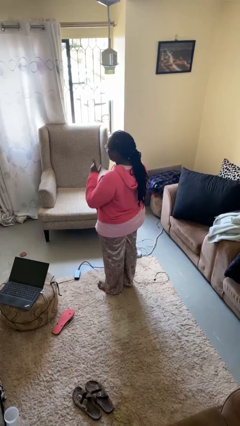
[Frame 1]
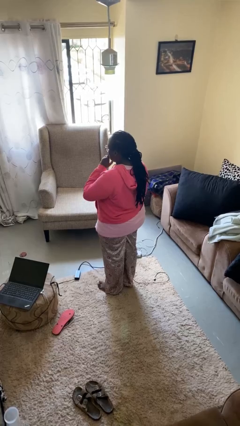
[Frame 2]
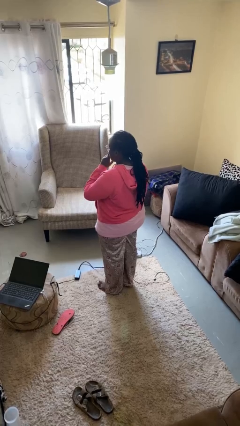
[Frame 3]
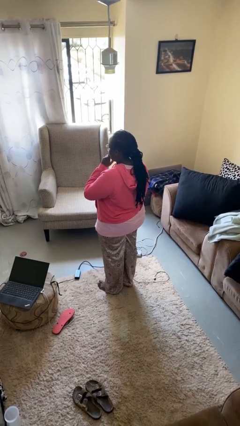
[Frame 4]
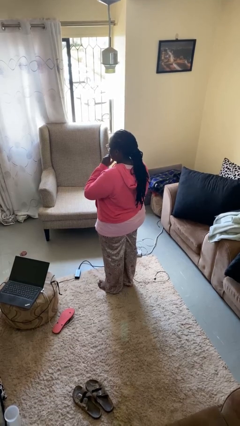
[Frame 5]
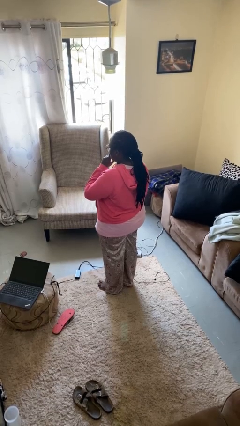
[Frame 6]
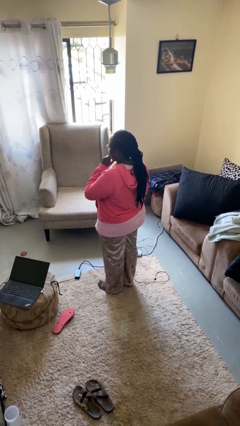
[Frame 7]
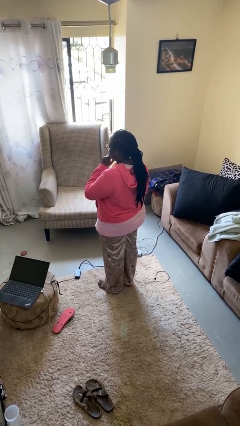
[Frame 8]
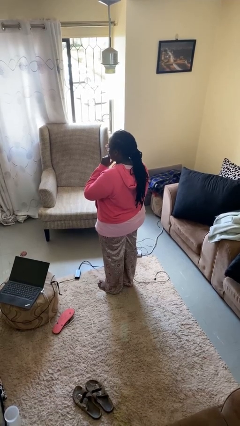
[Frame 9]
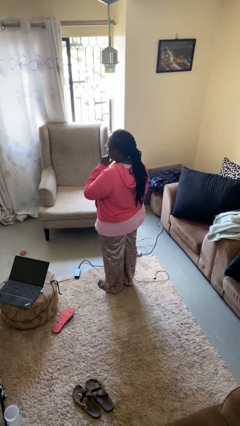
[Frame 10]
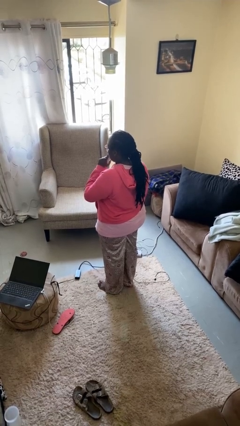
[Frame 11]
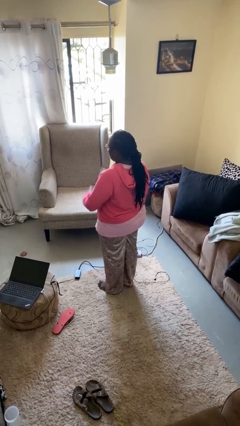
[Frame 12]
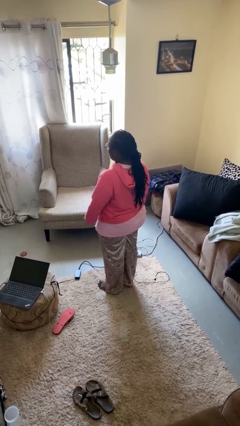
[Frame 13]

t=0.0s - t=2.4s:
person gestures be quiet

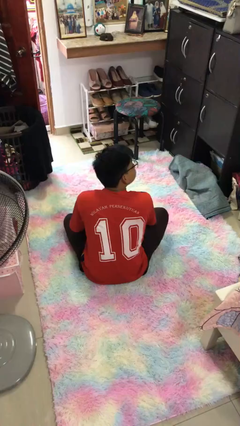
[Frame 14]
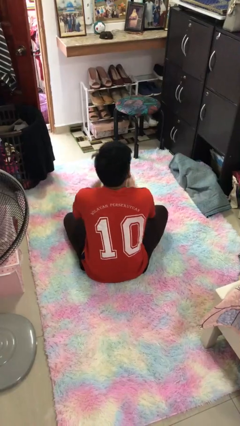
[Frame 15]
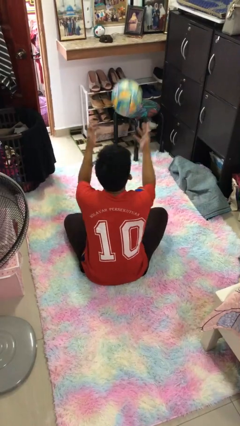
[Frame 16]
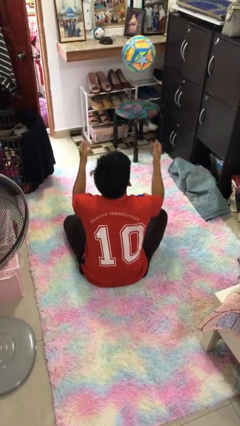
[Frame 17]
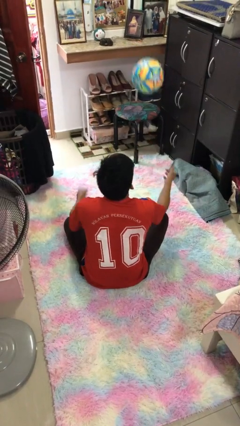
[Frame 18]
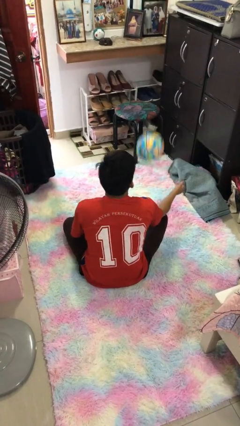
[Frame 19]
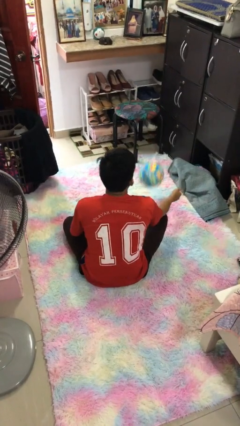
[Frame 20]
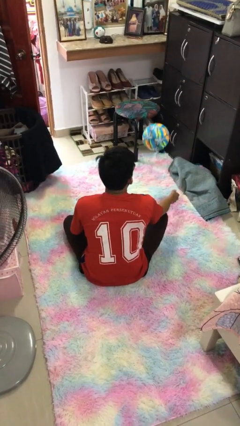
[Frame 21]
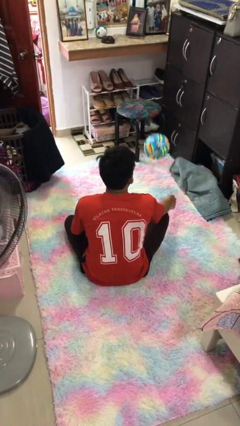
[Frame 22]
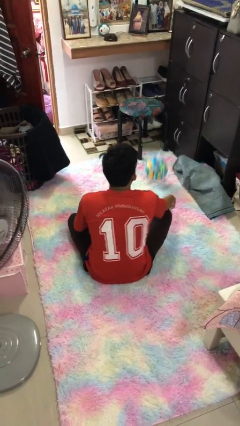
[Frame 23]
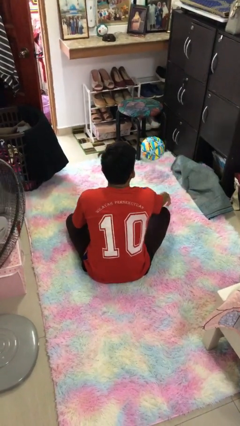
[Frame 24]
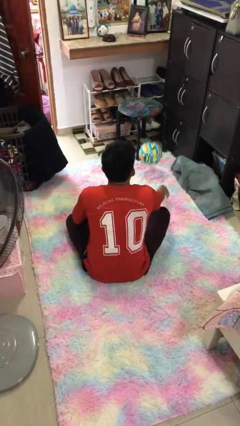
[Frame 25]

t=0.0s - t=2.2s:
person bounces ball on floor

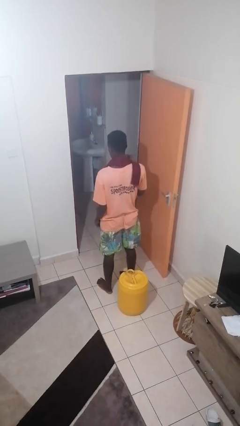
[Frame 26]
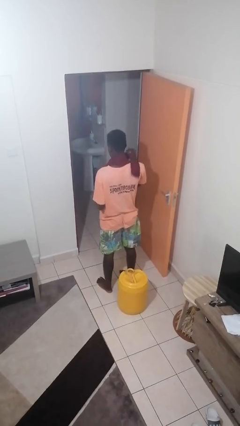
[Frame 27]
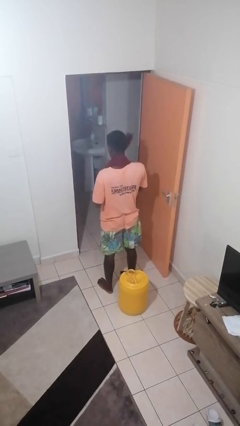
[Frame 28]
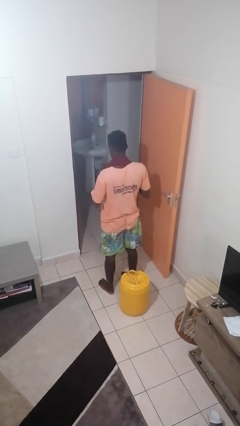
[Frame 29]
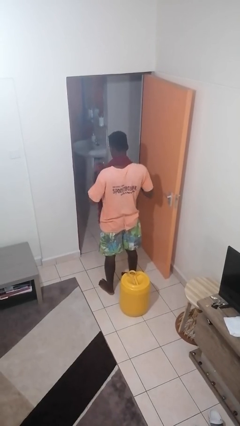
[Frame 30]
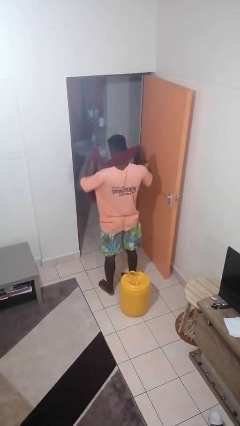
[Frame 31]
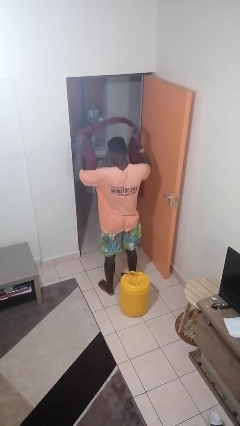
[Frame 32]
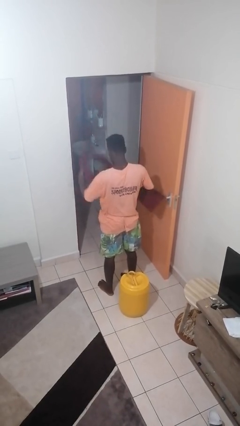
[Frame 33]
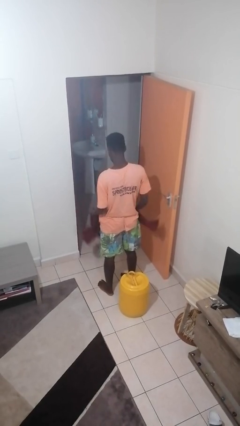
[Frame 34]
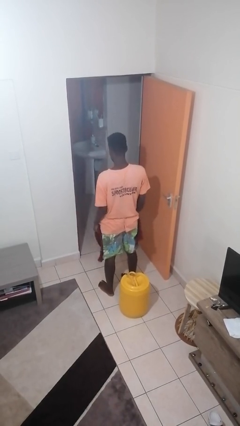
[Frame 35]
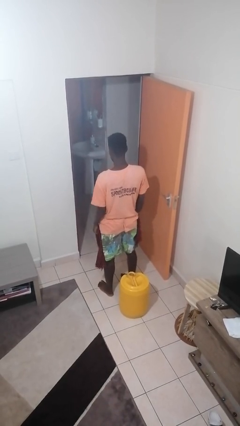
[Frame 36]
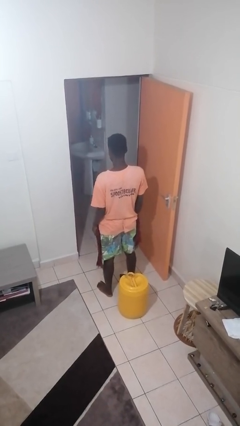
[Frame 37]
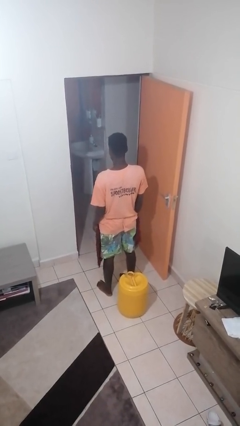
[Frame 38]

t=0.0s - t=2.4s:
person takes off scarf

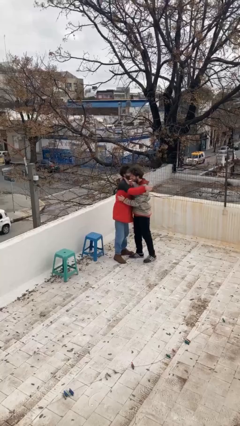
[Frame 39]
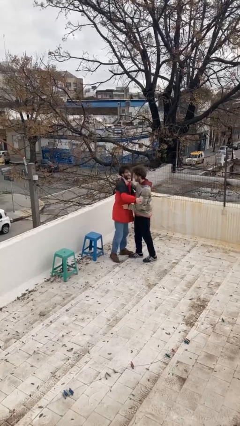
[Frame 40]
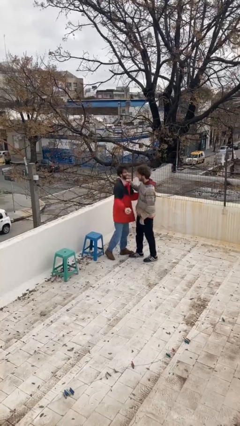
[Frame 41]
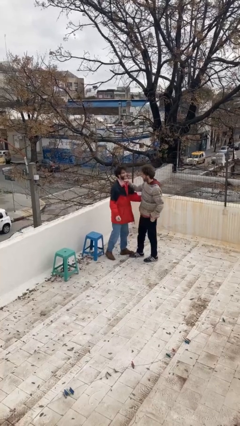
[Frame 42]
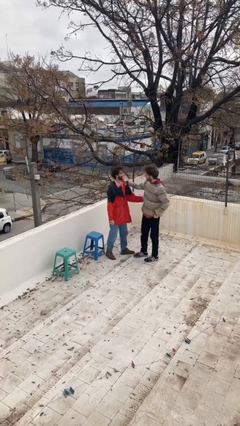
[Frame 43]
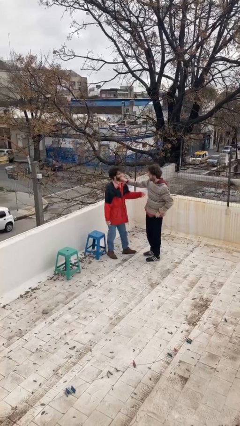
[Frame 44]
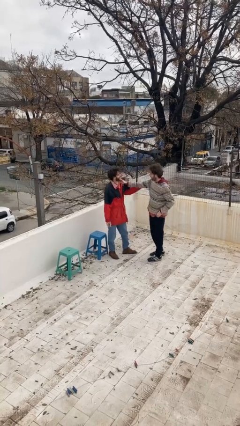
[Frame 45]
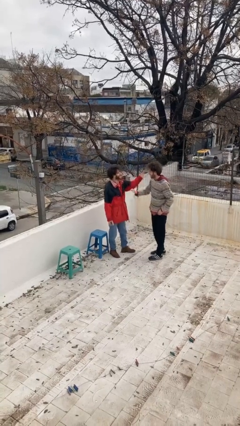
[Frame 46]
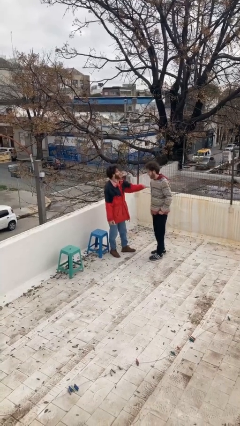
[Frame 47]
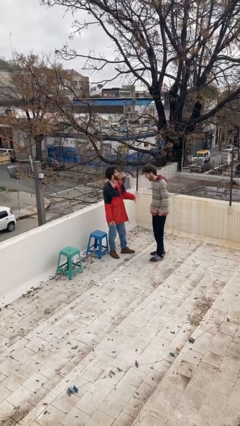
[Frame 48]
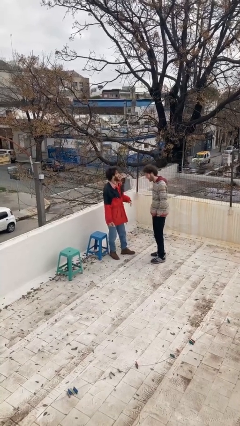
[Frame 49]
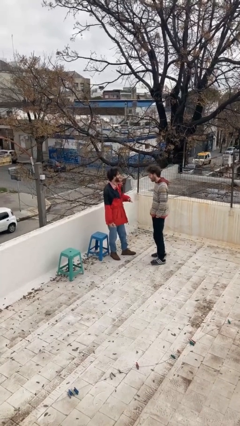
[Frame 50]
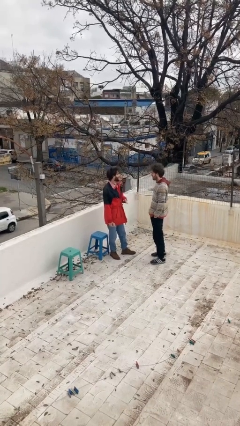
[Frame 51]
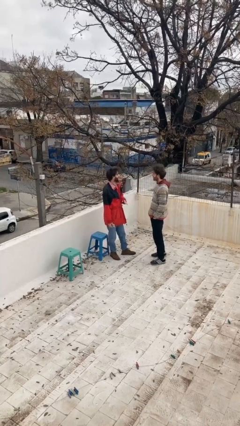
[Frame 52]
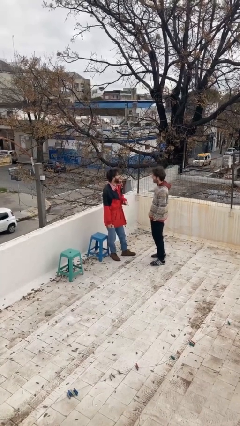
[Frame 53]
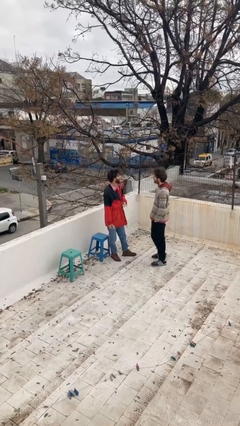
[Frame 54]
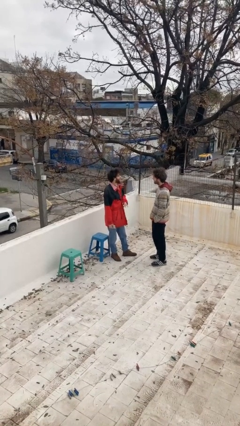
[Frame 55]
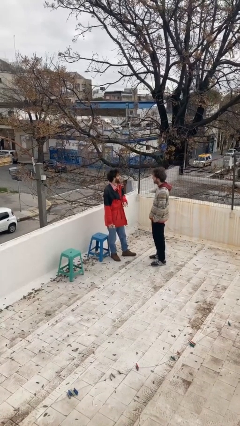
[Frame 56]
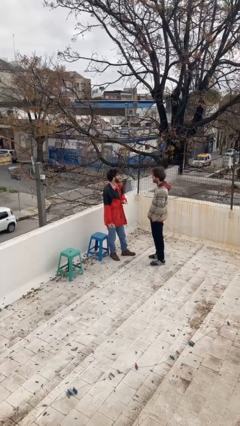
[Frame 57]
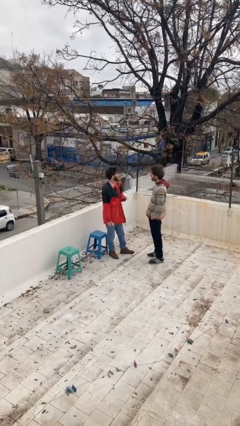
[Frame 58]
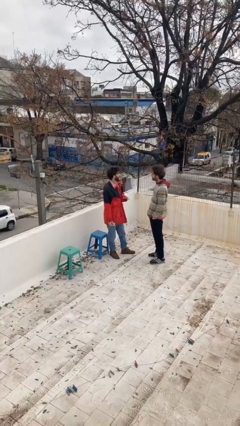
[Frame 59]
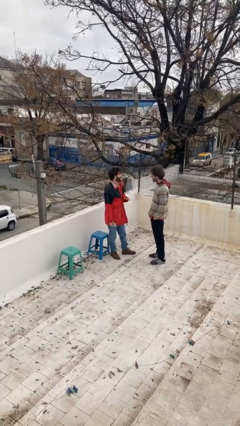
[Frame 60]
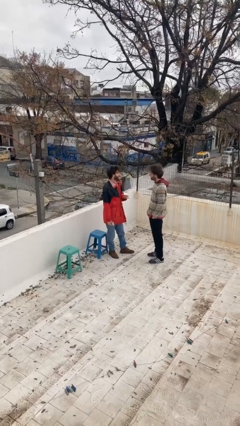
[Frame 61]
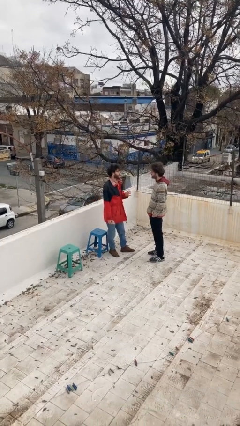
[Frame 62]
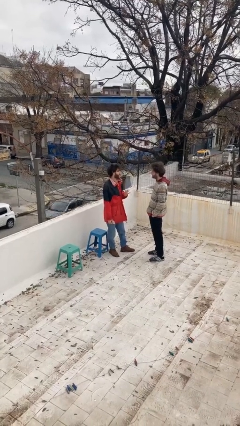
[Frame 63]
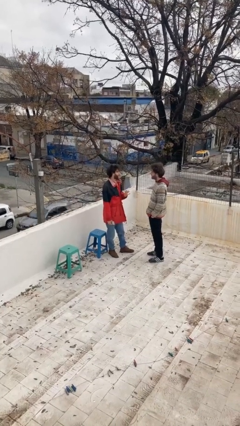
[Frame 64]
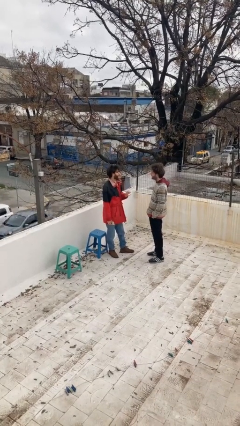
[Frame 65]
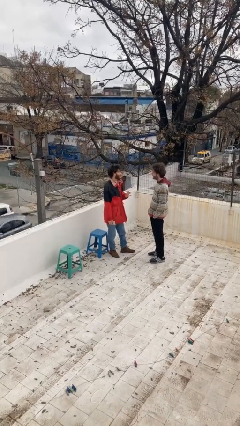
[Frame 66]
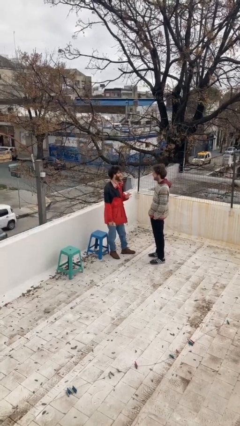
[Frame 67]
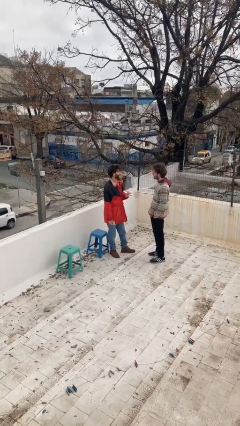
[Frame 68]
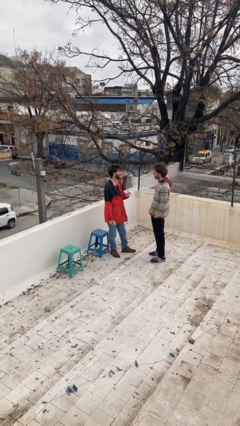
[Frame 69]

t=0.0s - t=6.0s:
person talks to person

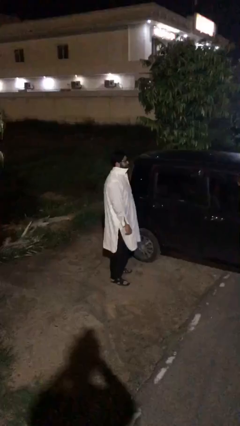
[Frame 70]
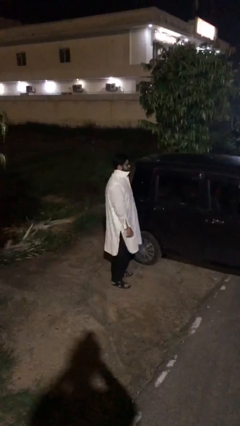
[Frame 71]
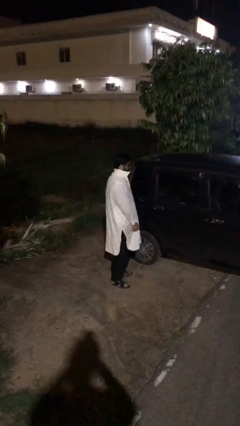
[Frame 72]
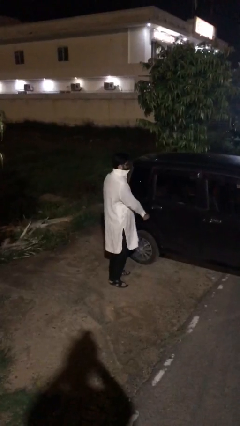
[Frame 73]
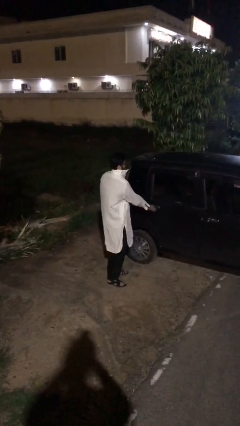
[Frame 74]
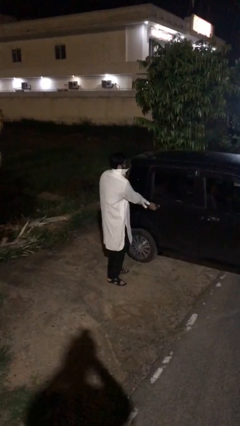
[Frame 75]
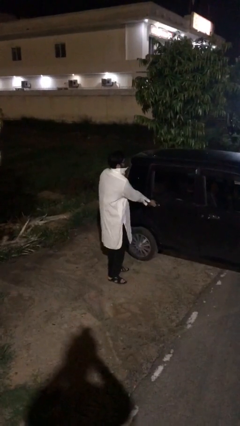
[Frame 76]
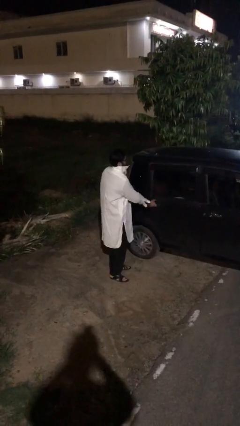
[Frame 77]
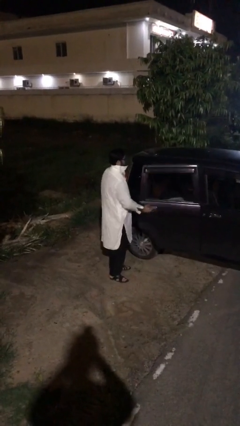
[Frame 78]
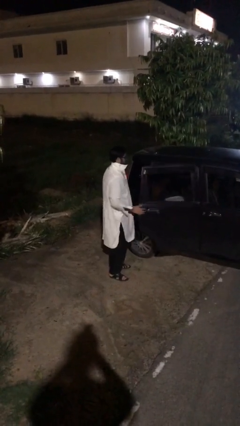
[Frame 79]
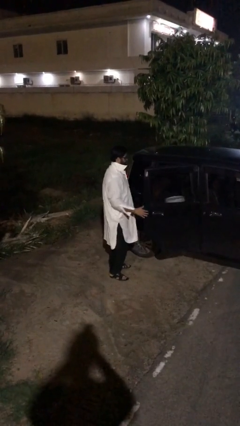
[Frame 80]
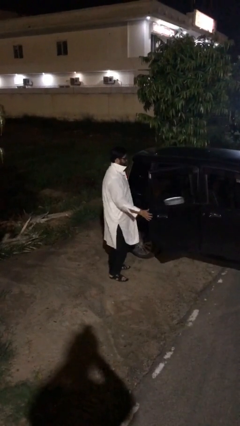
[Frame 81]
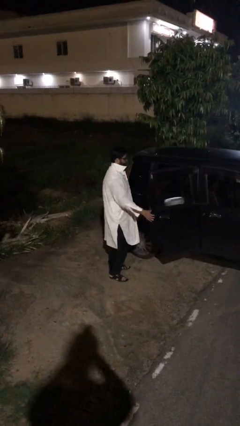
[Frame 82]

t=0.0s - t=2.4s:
person opens car door

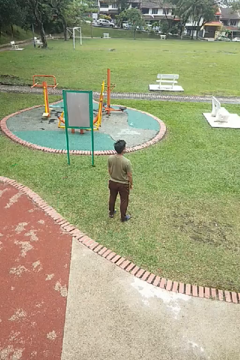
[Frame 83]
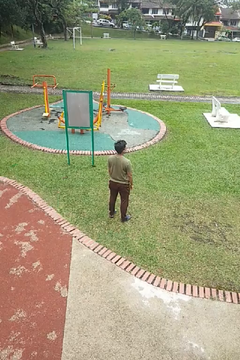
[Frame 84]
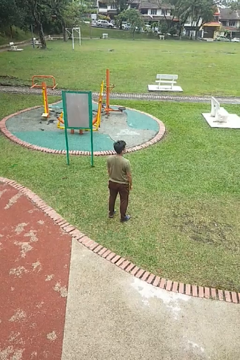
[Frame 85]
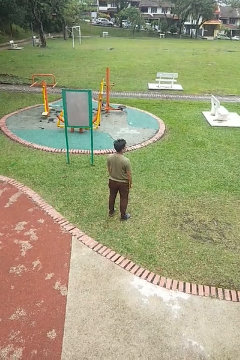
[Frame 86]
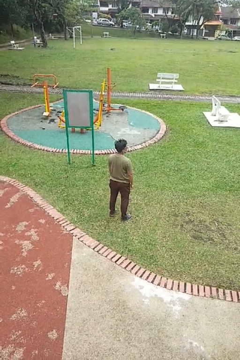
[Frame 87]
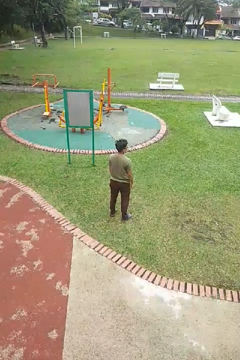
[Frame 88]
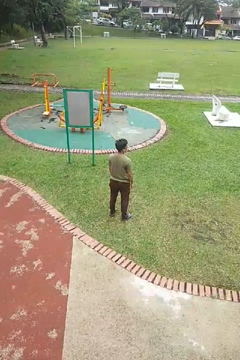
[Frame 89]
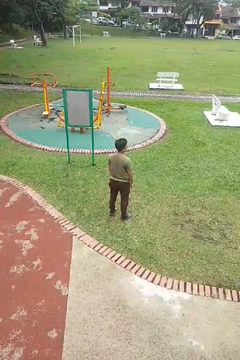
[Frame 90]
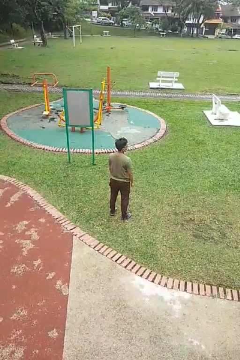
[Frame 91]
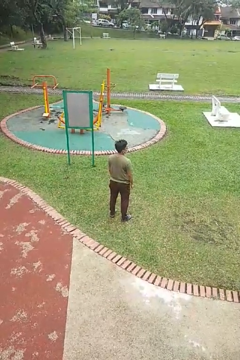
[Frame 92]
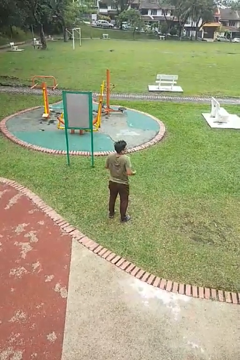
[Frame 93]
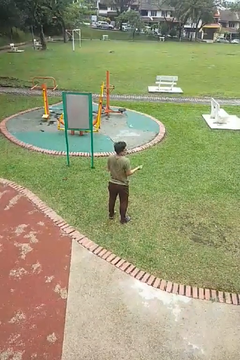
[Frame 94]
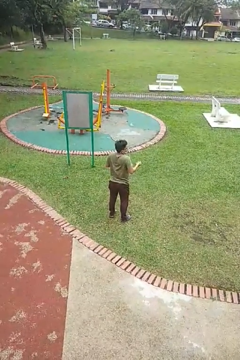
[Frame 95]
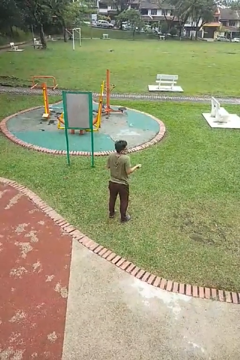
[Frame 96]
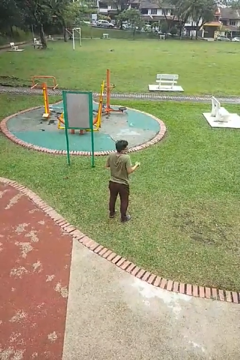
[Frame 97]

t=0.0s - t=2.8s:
person shrugs
